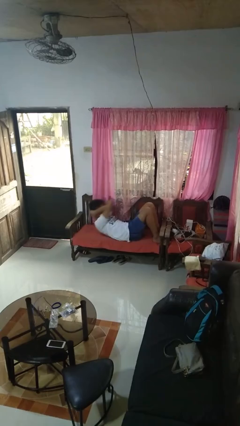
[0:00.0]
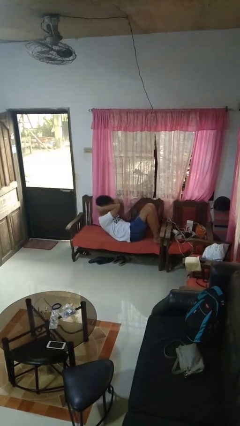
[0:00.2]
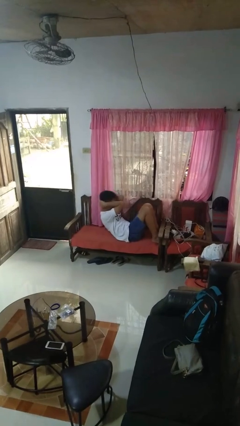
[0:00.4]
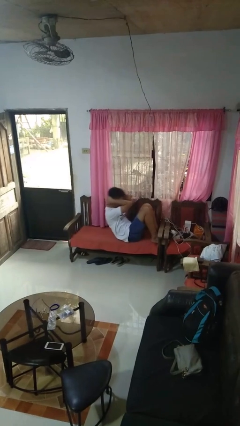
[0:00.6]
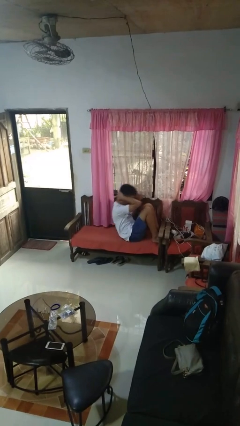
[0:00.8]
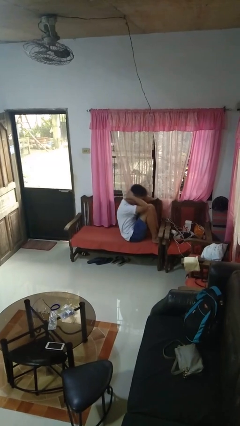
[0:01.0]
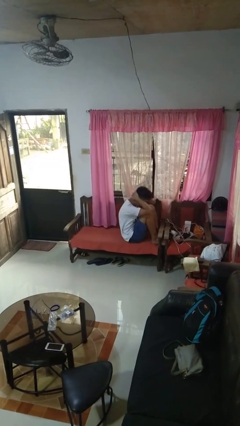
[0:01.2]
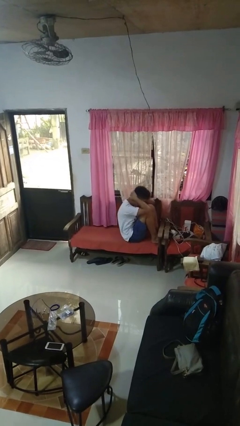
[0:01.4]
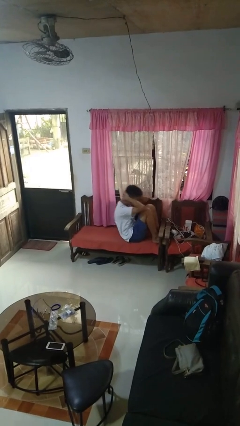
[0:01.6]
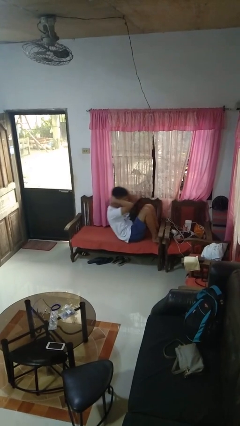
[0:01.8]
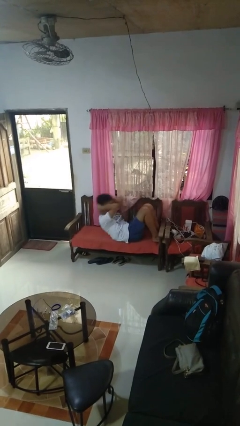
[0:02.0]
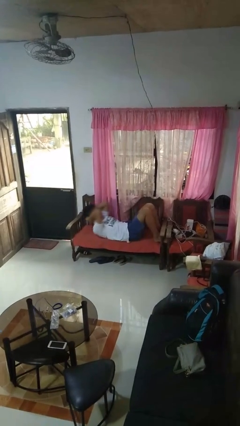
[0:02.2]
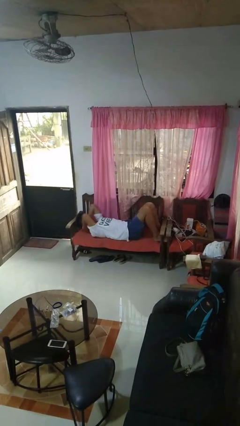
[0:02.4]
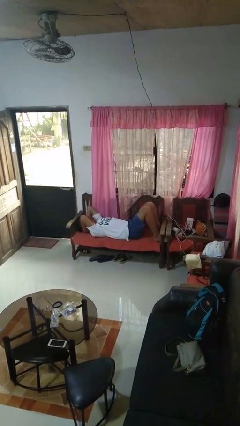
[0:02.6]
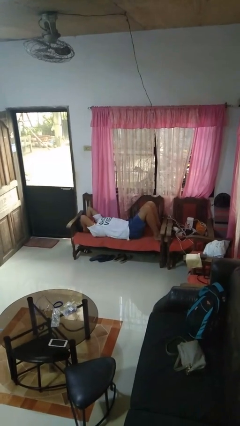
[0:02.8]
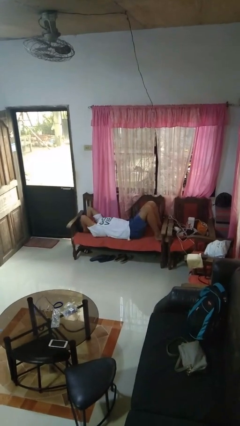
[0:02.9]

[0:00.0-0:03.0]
person exercises with situp

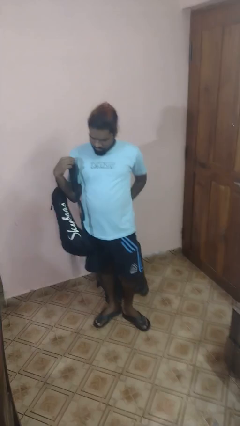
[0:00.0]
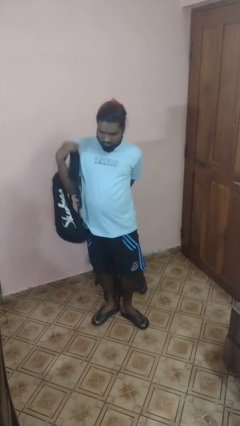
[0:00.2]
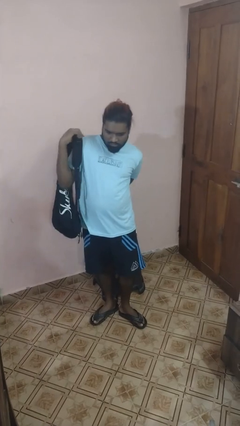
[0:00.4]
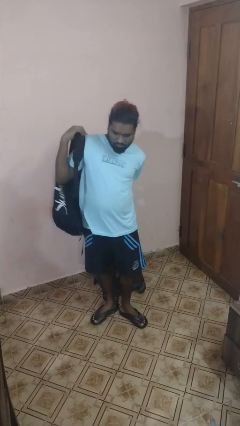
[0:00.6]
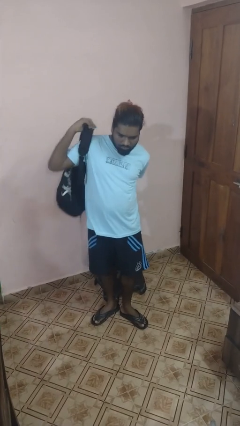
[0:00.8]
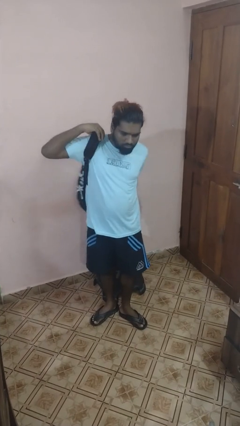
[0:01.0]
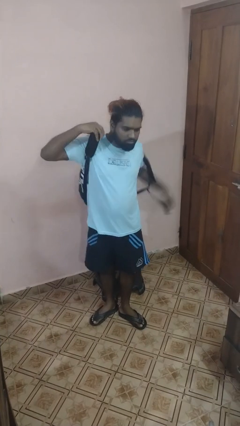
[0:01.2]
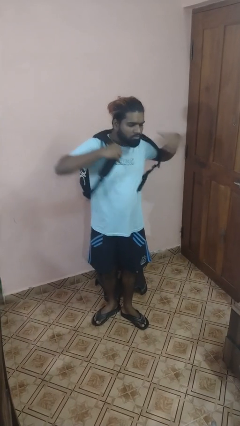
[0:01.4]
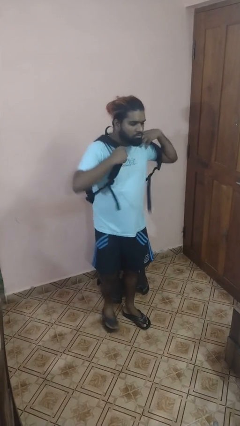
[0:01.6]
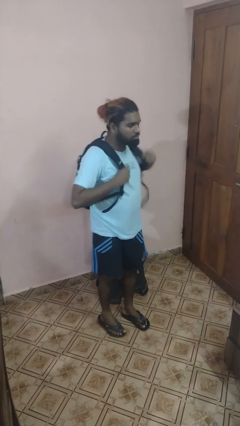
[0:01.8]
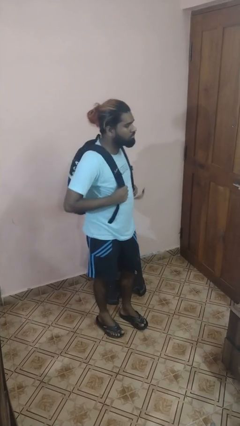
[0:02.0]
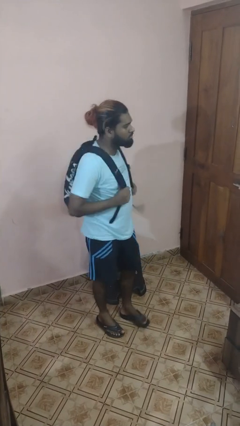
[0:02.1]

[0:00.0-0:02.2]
person puts on backpack

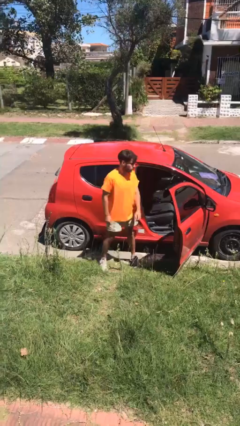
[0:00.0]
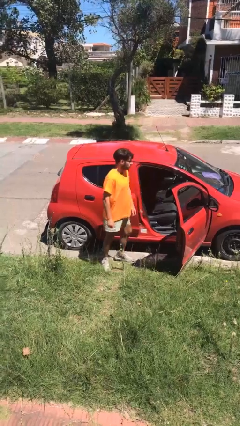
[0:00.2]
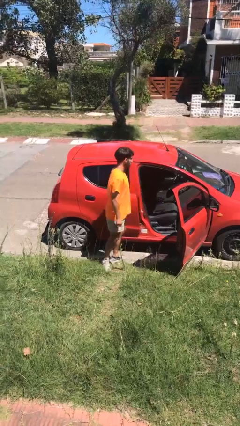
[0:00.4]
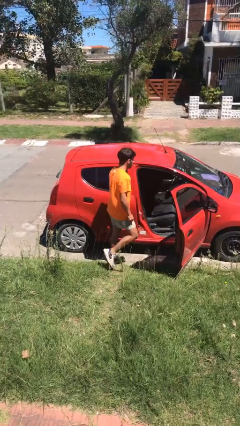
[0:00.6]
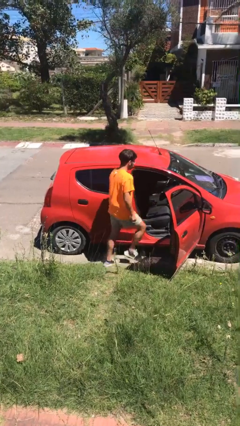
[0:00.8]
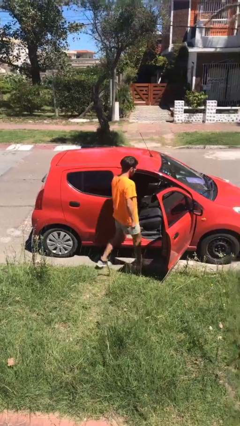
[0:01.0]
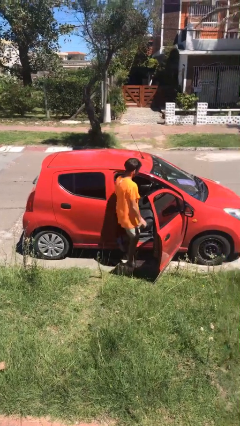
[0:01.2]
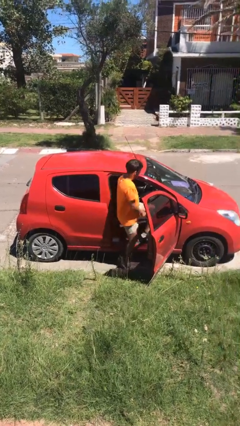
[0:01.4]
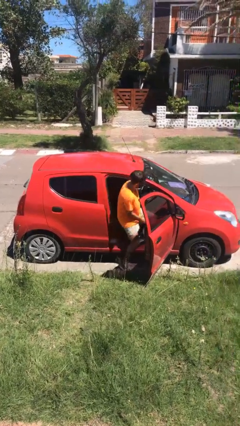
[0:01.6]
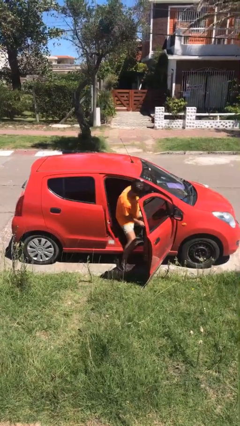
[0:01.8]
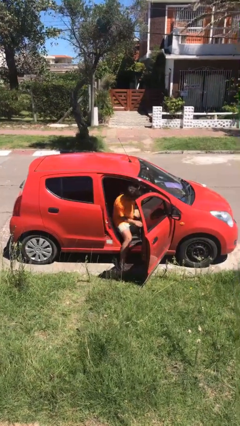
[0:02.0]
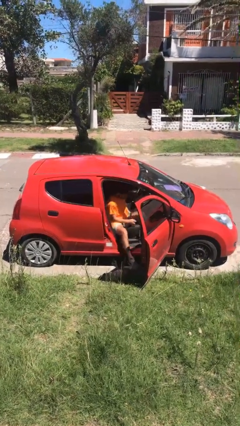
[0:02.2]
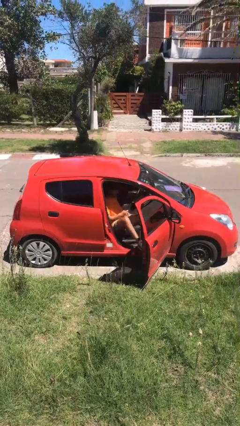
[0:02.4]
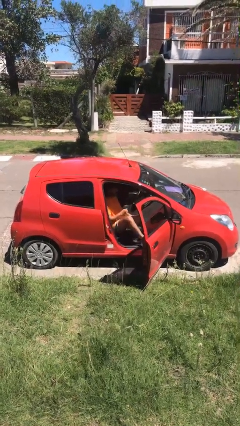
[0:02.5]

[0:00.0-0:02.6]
person enters car

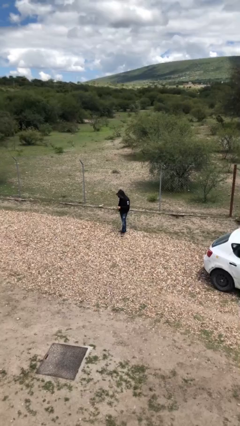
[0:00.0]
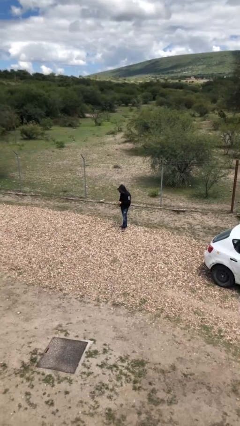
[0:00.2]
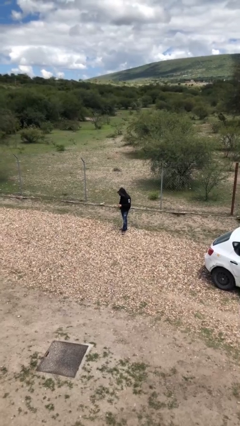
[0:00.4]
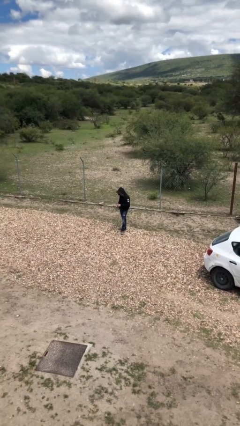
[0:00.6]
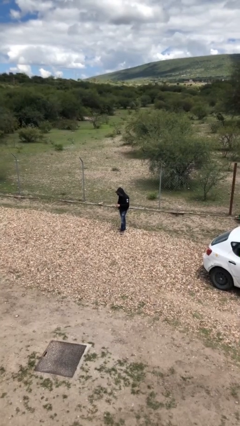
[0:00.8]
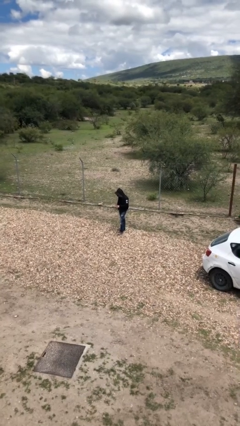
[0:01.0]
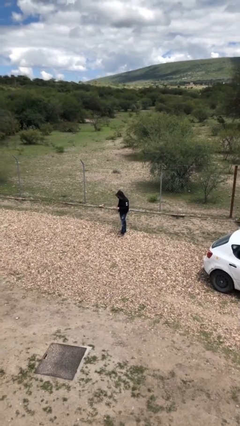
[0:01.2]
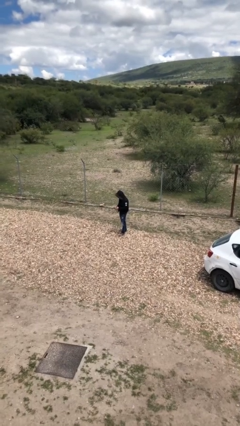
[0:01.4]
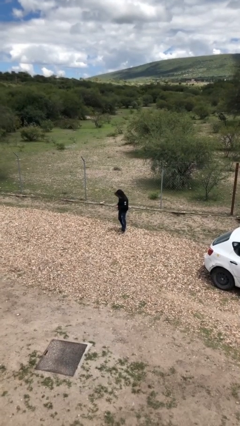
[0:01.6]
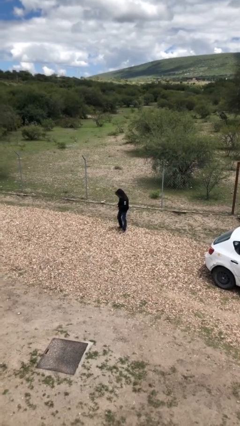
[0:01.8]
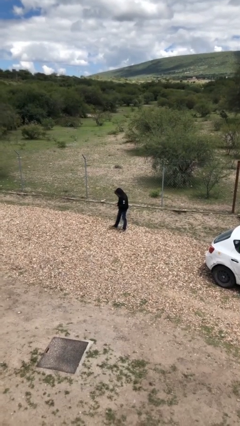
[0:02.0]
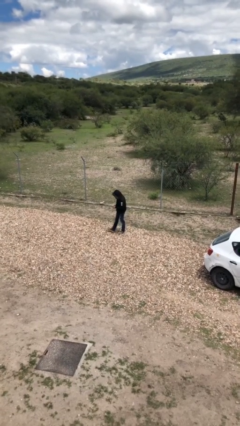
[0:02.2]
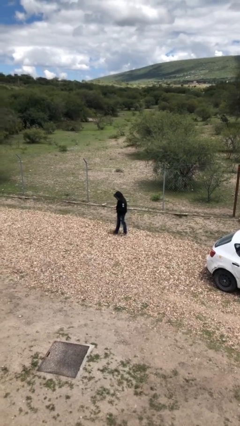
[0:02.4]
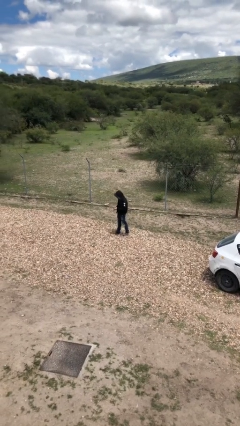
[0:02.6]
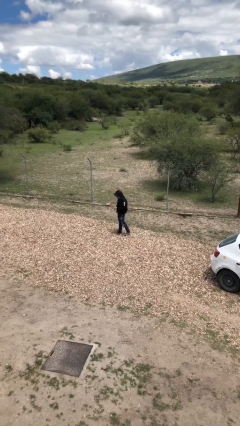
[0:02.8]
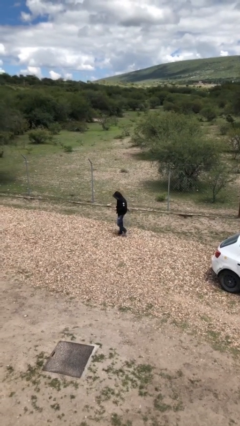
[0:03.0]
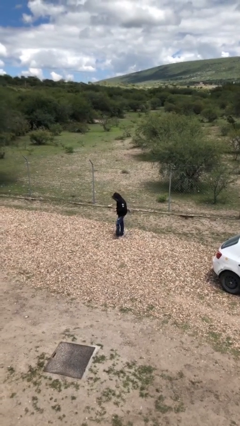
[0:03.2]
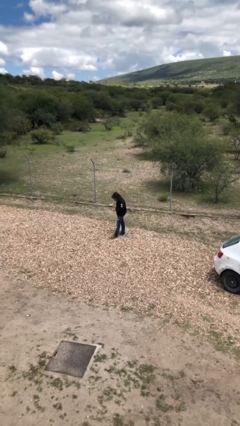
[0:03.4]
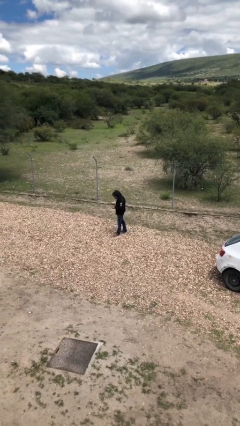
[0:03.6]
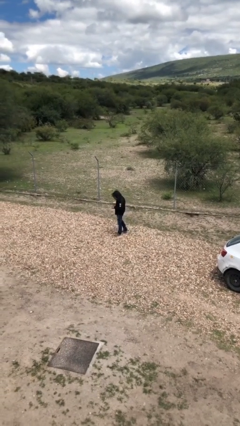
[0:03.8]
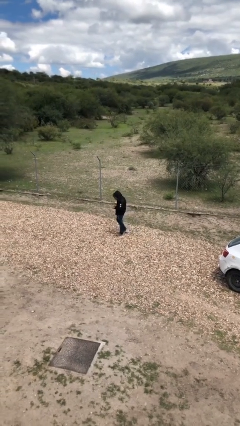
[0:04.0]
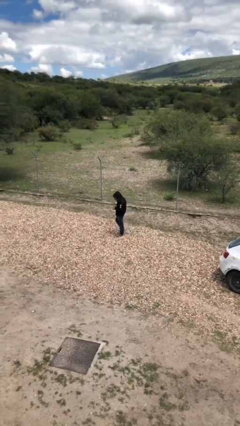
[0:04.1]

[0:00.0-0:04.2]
person texts on phone

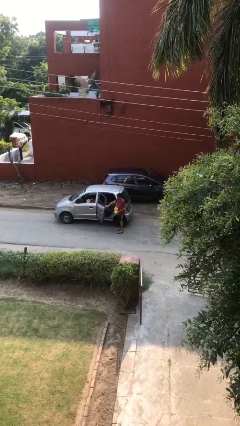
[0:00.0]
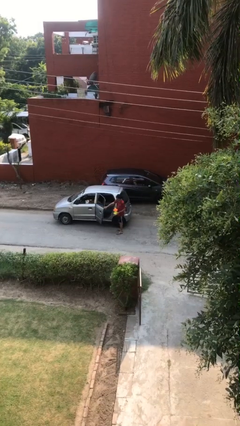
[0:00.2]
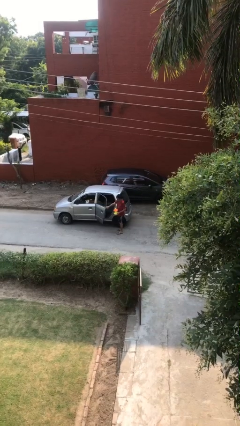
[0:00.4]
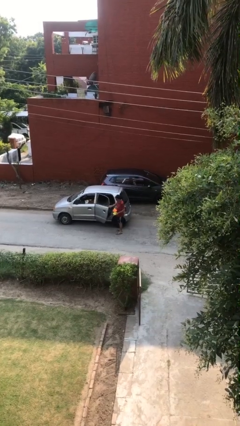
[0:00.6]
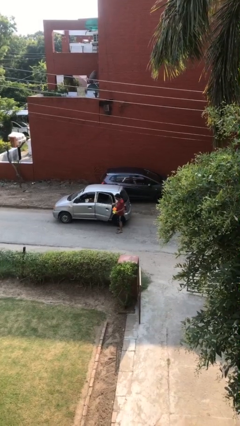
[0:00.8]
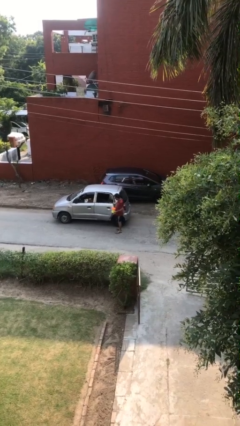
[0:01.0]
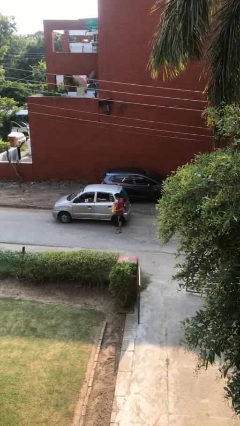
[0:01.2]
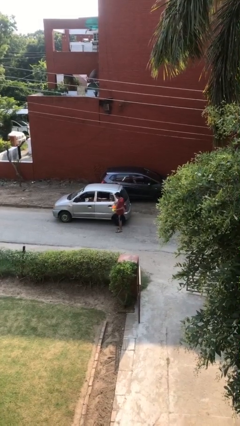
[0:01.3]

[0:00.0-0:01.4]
person closes car door

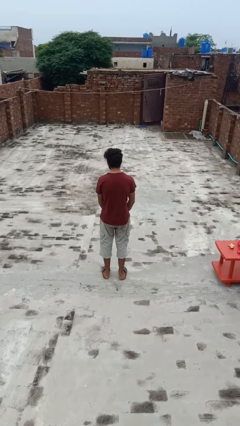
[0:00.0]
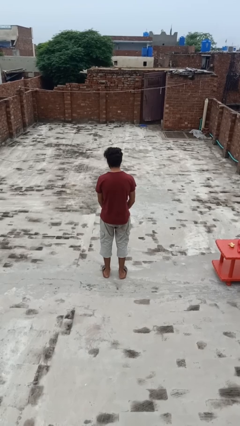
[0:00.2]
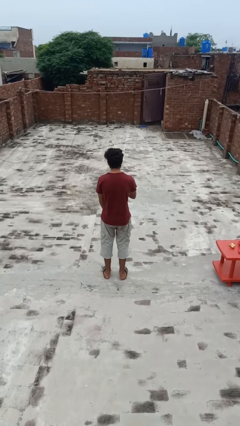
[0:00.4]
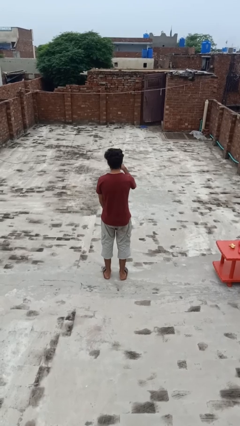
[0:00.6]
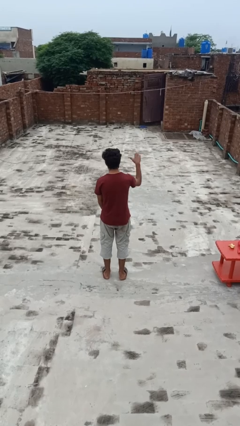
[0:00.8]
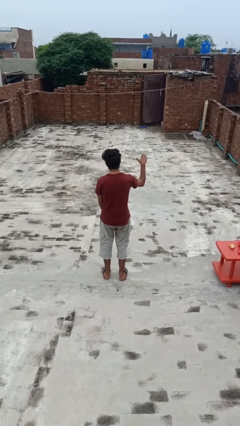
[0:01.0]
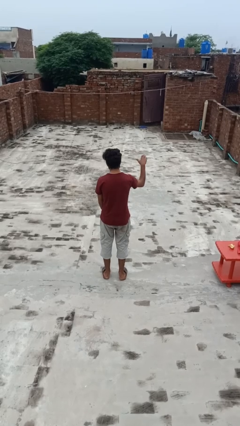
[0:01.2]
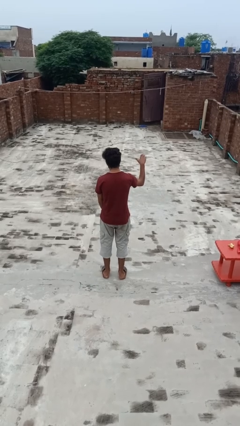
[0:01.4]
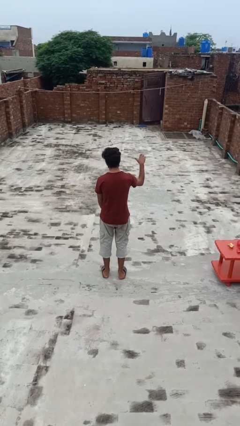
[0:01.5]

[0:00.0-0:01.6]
person gestures cut

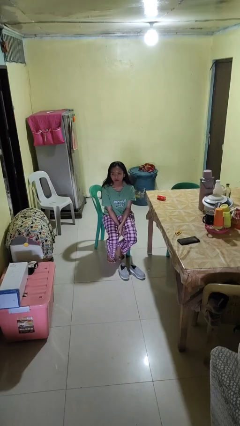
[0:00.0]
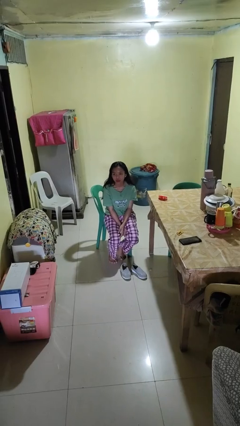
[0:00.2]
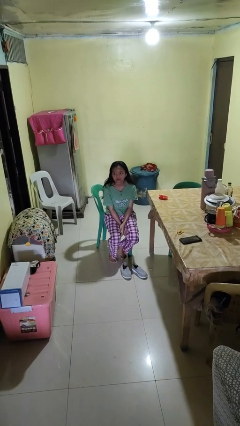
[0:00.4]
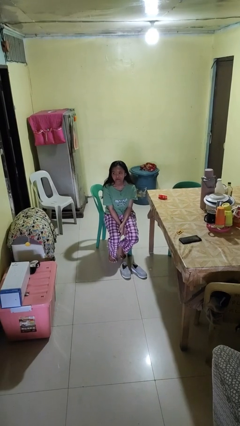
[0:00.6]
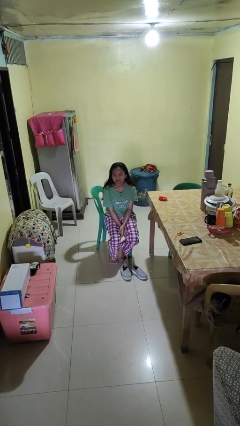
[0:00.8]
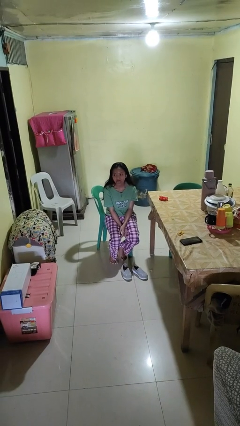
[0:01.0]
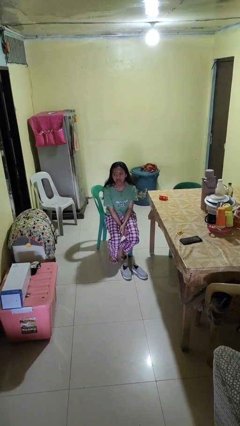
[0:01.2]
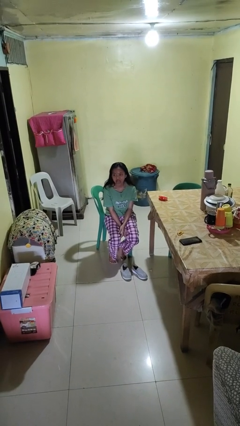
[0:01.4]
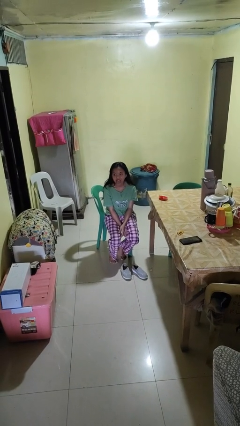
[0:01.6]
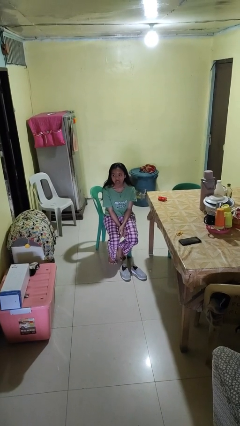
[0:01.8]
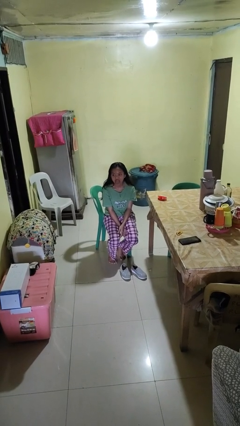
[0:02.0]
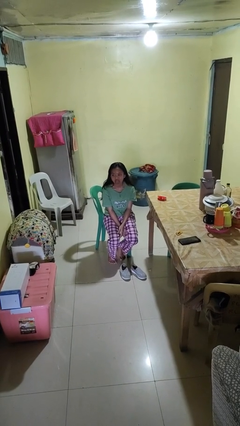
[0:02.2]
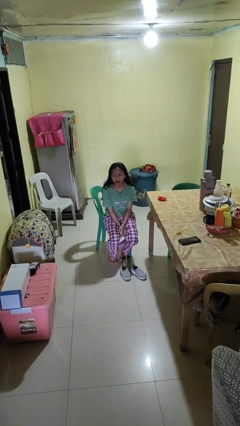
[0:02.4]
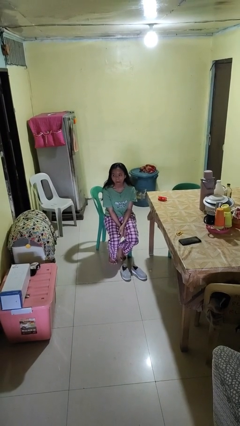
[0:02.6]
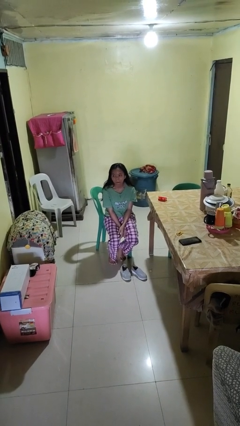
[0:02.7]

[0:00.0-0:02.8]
person sticks out tongue
